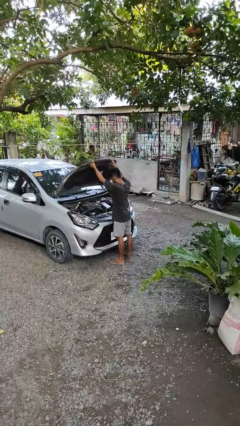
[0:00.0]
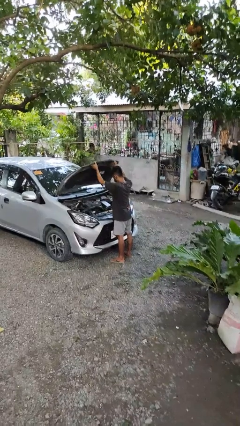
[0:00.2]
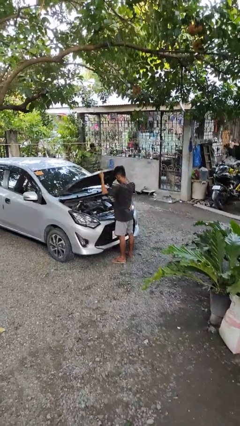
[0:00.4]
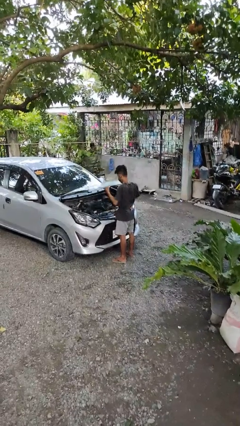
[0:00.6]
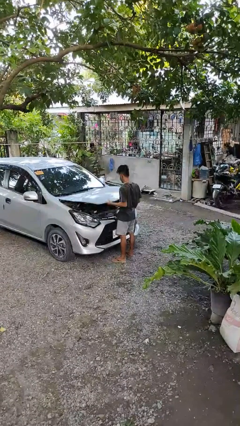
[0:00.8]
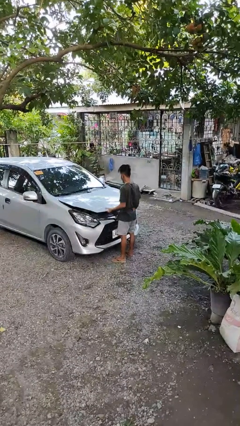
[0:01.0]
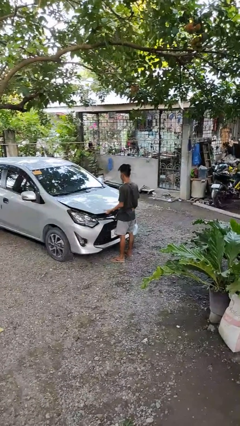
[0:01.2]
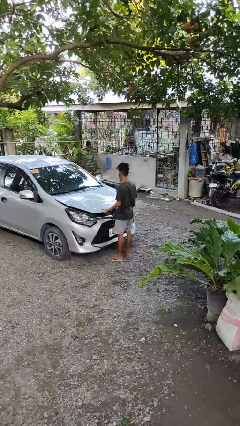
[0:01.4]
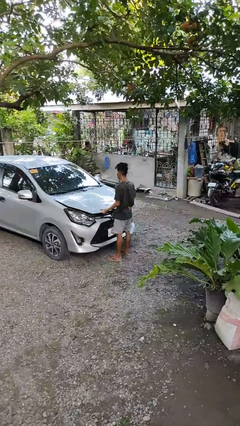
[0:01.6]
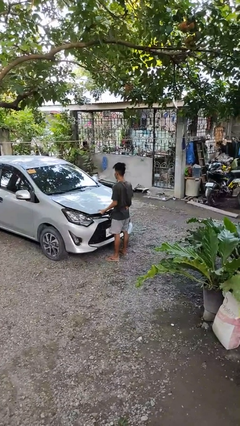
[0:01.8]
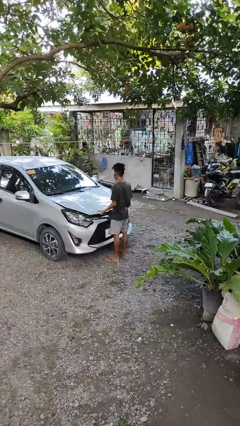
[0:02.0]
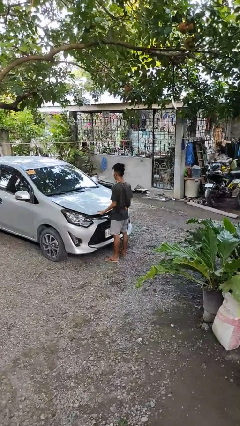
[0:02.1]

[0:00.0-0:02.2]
person closes car hood

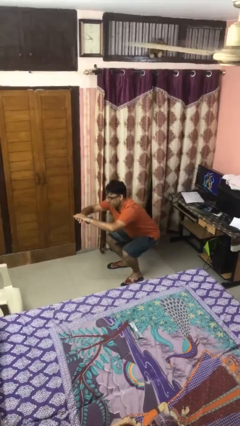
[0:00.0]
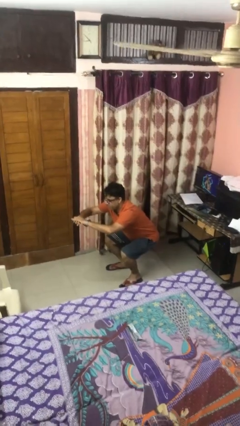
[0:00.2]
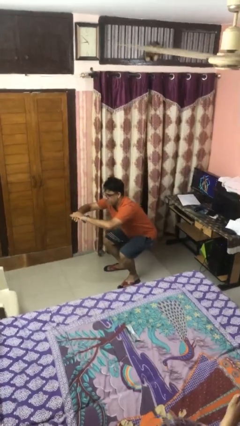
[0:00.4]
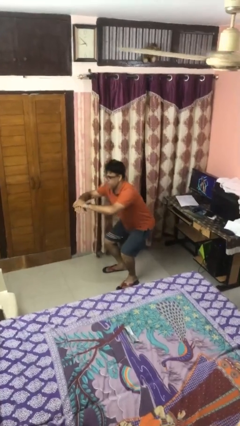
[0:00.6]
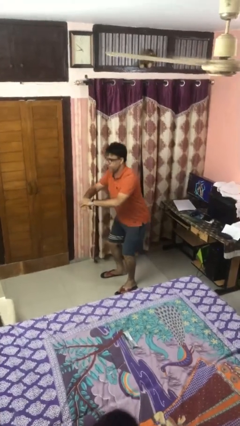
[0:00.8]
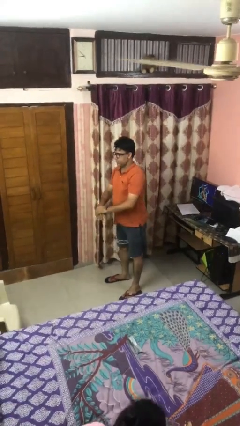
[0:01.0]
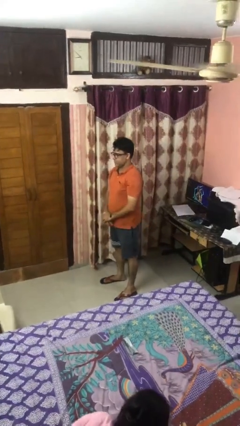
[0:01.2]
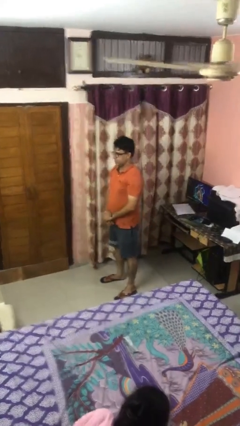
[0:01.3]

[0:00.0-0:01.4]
person stands up

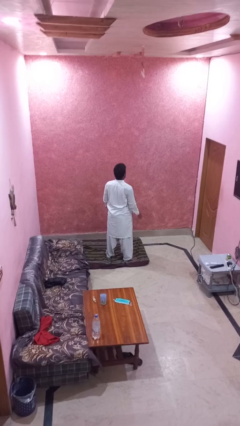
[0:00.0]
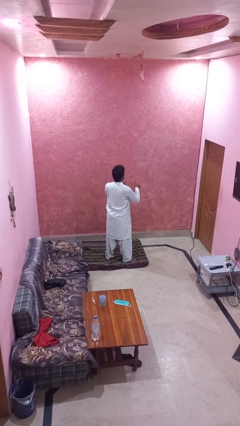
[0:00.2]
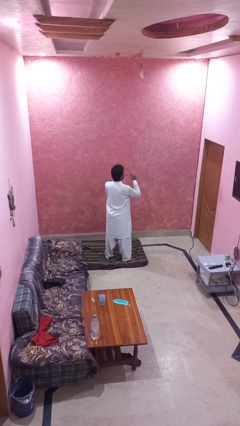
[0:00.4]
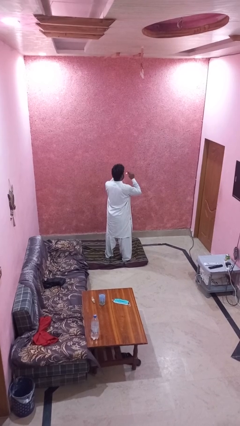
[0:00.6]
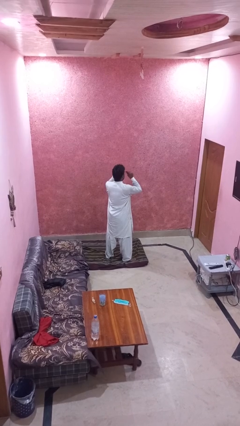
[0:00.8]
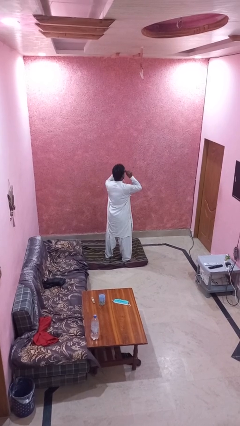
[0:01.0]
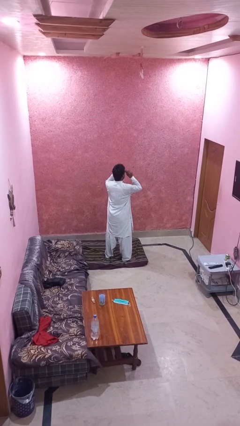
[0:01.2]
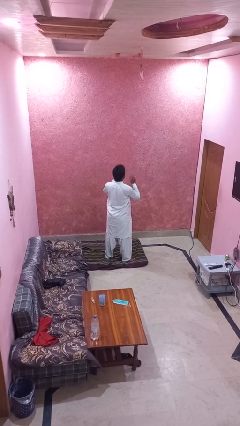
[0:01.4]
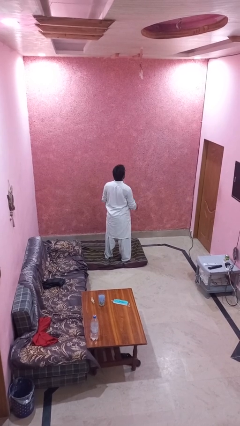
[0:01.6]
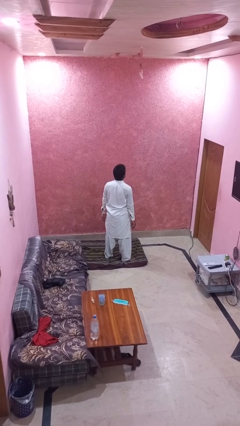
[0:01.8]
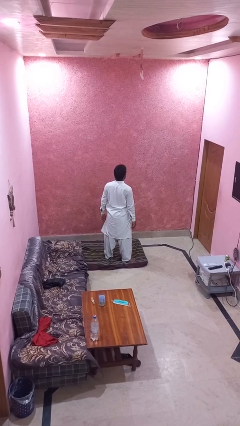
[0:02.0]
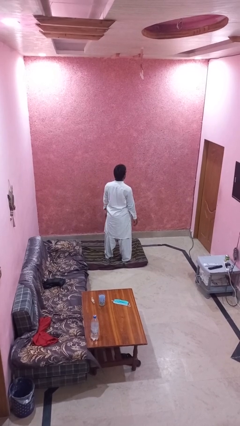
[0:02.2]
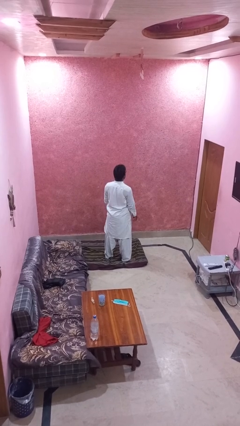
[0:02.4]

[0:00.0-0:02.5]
person puts on glasses

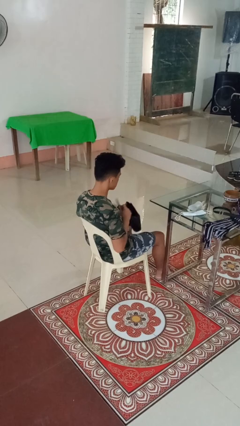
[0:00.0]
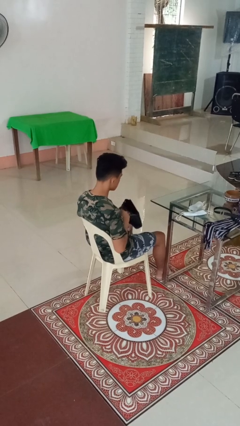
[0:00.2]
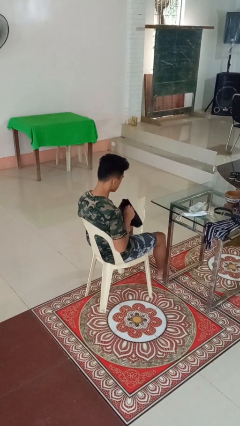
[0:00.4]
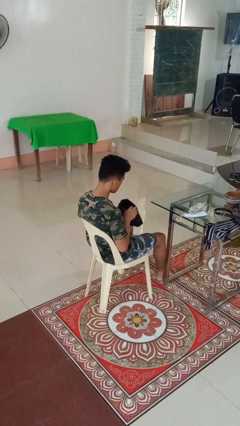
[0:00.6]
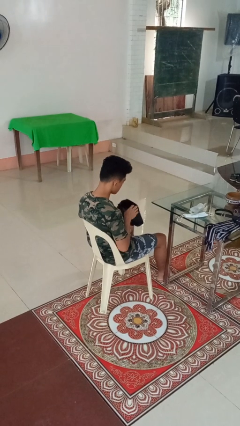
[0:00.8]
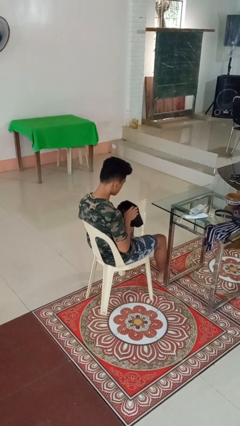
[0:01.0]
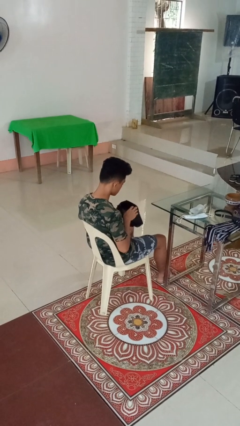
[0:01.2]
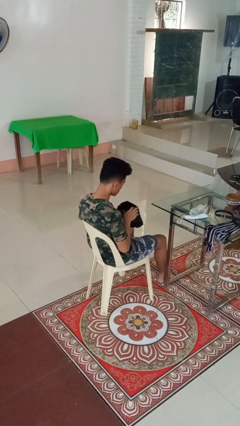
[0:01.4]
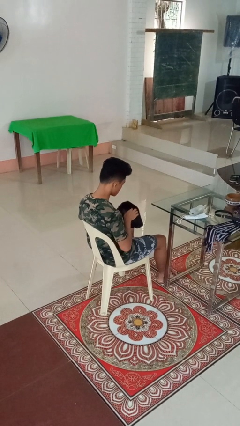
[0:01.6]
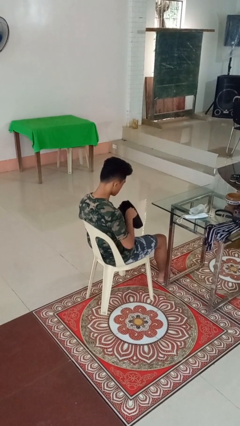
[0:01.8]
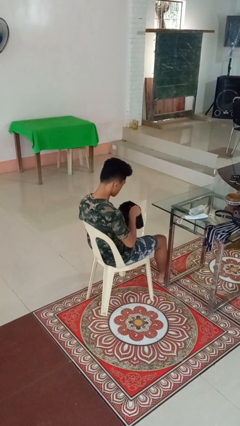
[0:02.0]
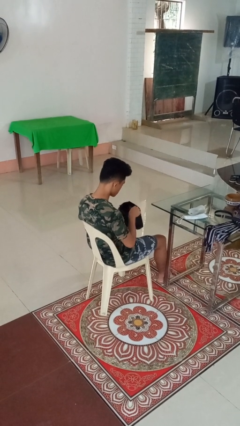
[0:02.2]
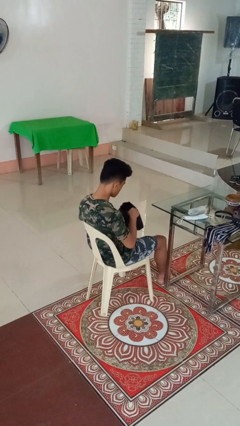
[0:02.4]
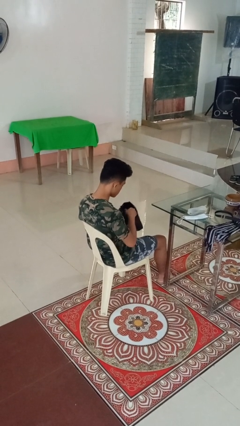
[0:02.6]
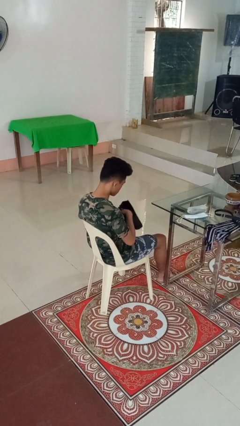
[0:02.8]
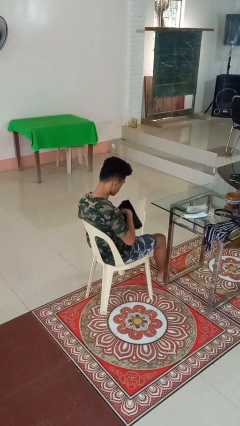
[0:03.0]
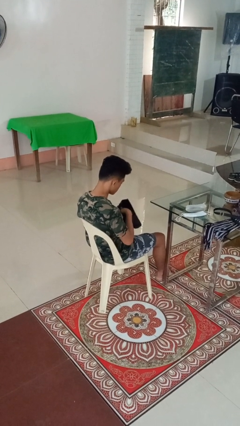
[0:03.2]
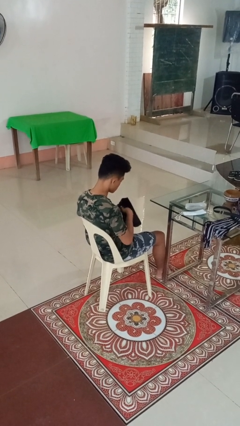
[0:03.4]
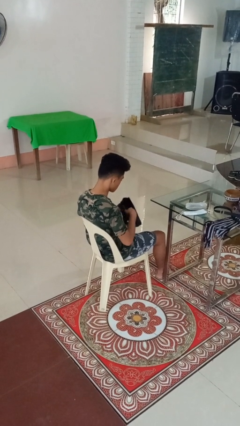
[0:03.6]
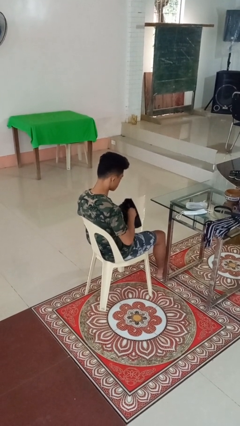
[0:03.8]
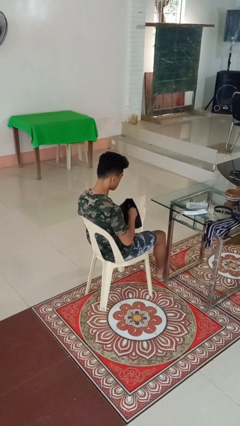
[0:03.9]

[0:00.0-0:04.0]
person searches in purse

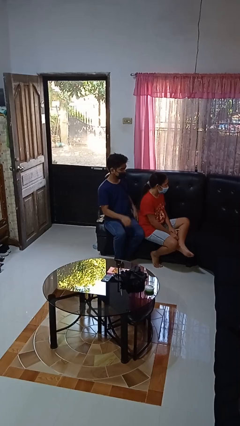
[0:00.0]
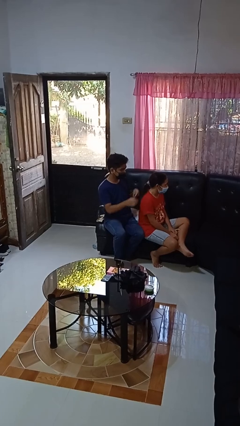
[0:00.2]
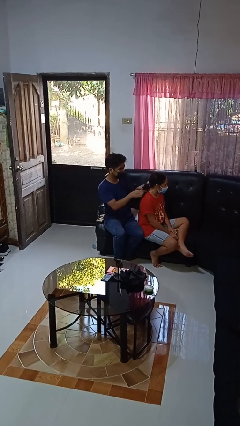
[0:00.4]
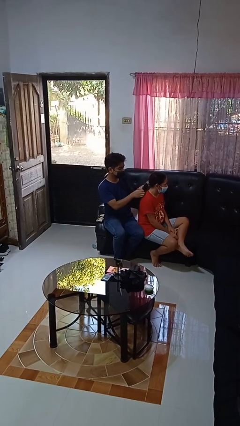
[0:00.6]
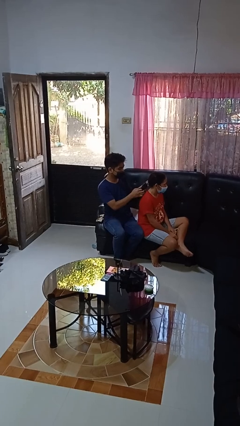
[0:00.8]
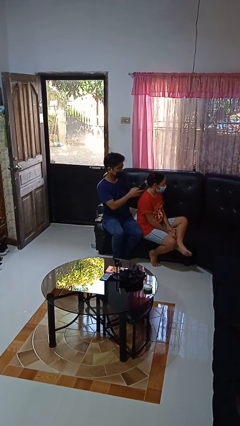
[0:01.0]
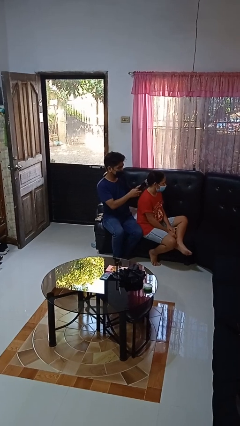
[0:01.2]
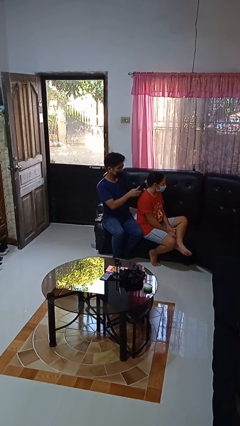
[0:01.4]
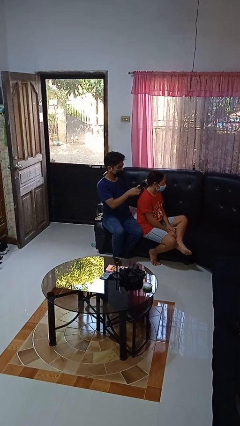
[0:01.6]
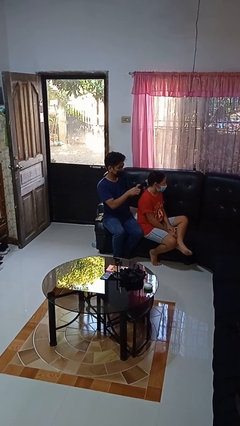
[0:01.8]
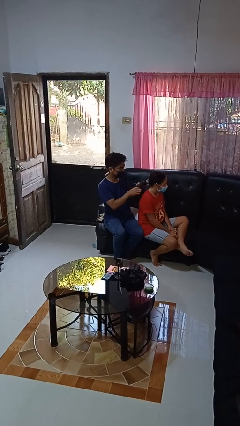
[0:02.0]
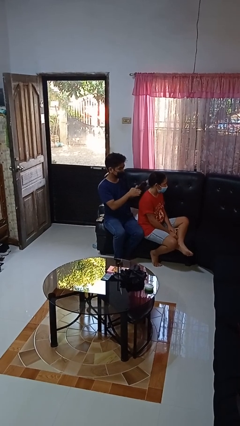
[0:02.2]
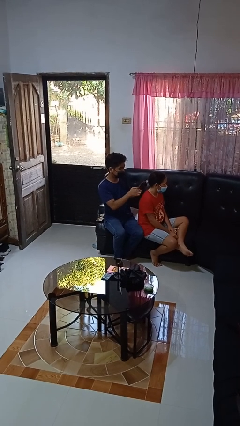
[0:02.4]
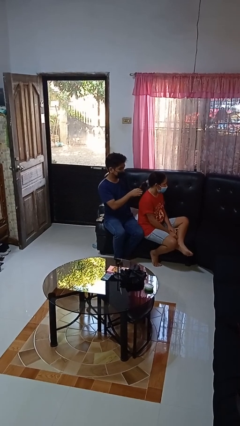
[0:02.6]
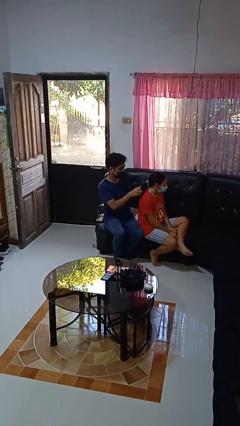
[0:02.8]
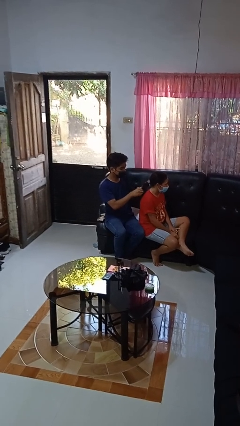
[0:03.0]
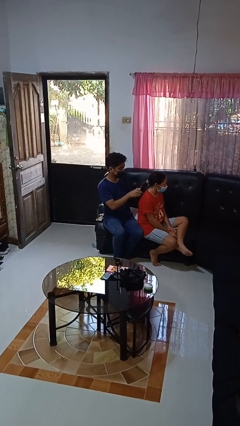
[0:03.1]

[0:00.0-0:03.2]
person braids hair of person

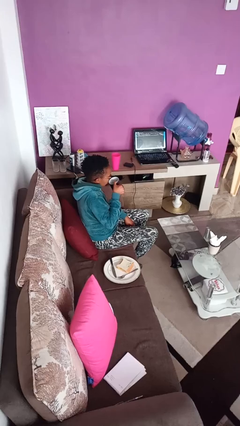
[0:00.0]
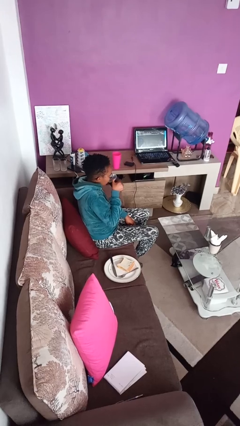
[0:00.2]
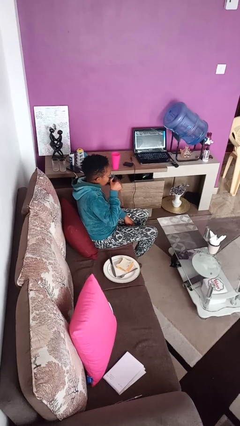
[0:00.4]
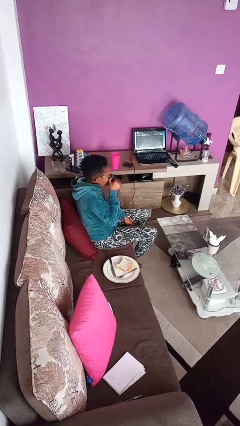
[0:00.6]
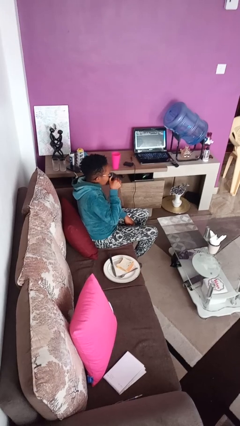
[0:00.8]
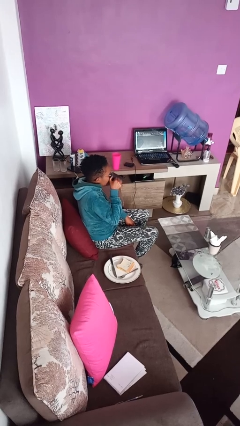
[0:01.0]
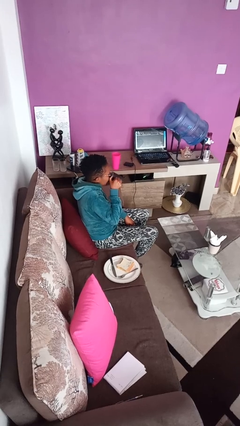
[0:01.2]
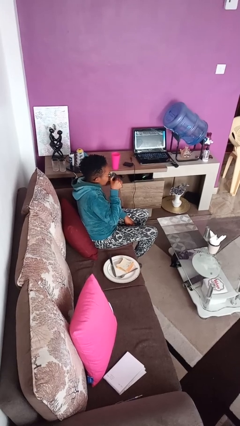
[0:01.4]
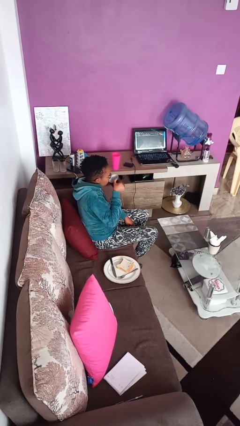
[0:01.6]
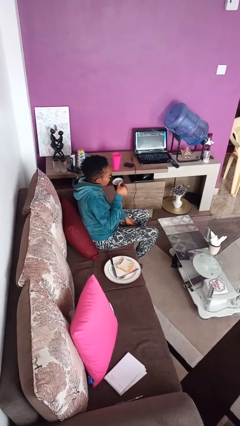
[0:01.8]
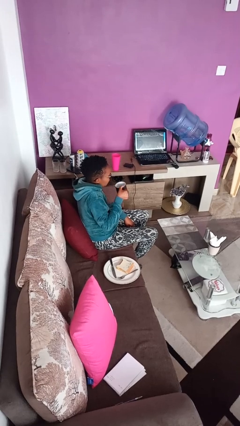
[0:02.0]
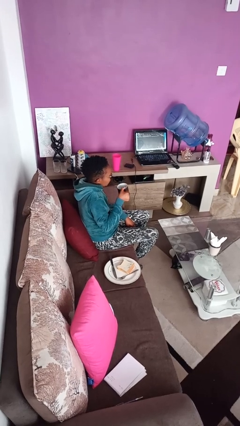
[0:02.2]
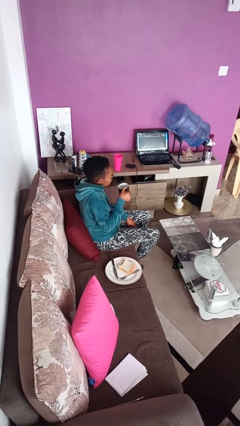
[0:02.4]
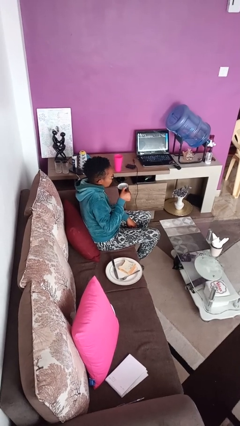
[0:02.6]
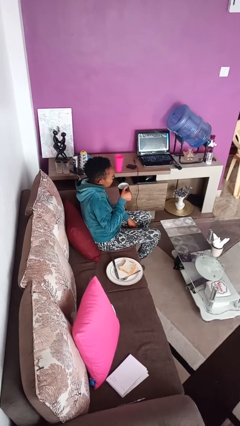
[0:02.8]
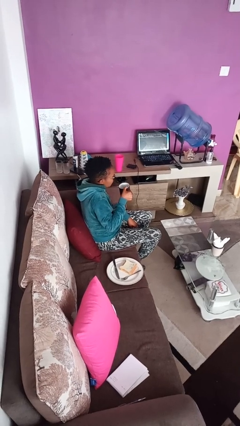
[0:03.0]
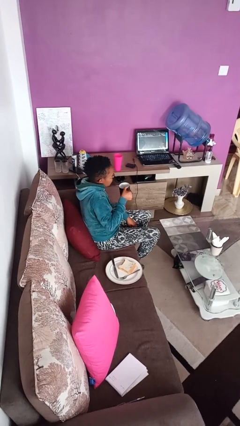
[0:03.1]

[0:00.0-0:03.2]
person drinks from mug

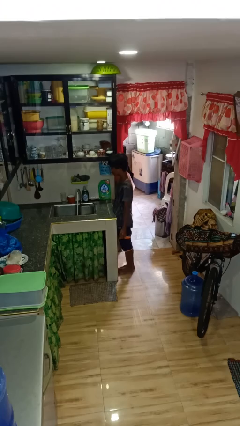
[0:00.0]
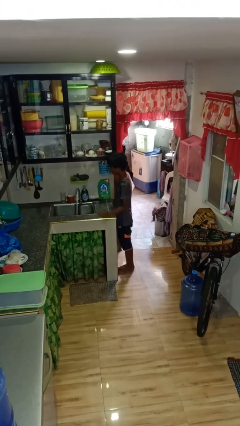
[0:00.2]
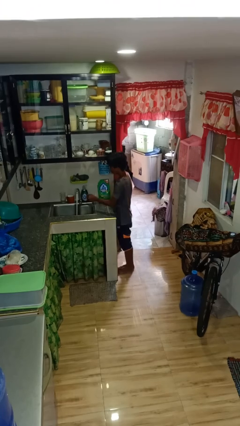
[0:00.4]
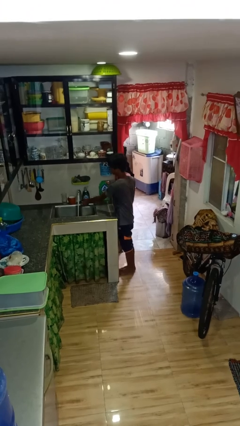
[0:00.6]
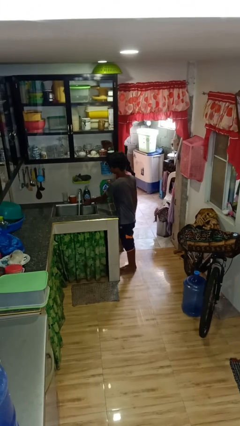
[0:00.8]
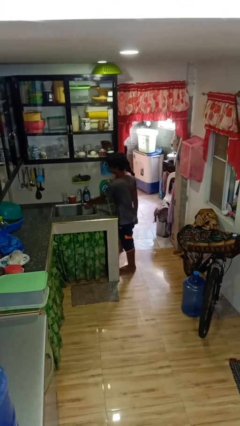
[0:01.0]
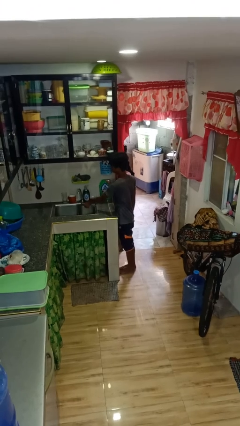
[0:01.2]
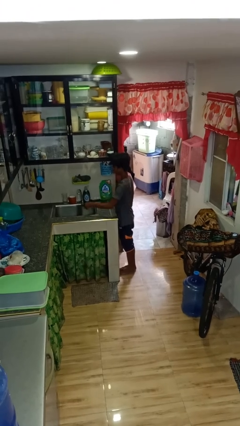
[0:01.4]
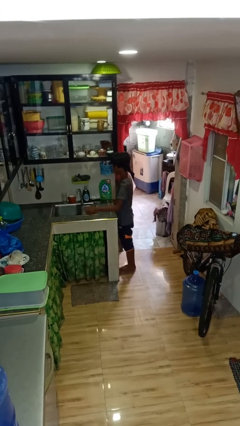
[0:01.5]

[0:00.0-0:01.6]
person turns off faucet
